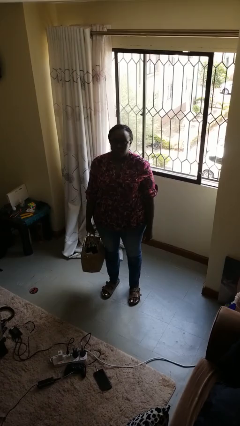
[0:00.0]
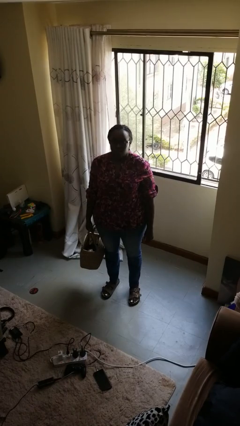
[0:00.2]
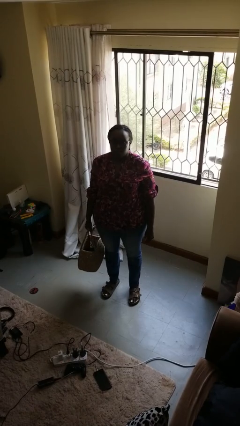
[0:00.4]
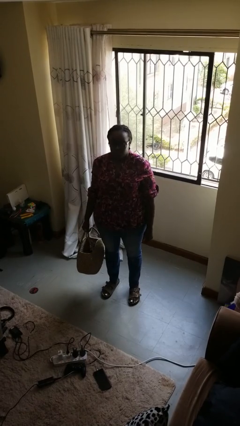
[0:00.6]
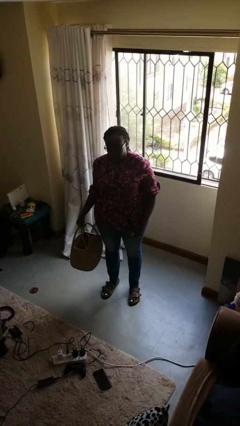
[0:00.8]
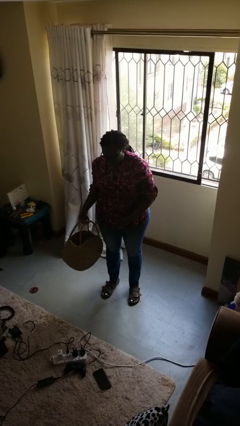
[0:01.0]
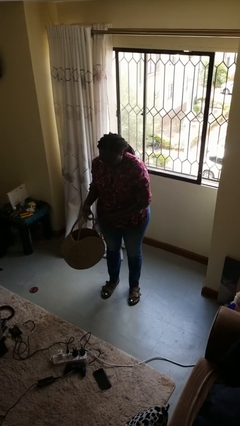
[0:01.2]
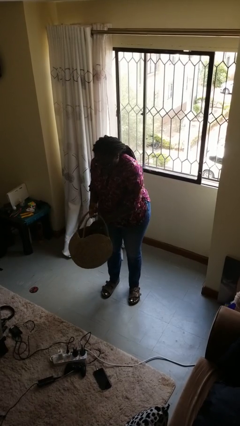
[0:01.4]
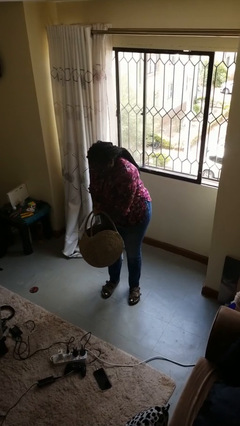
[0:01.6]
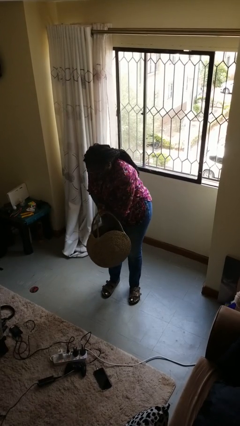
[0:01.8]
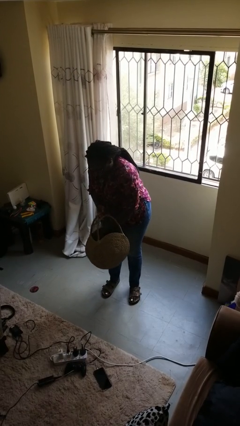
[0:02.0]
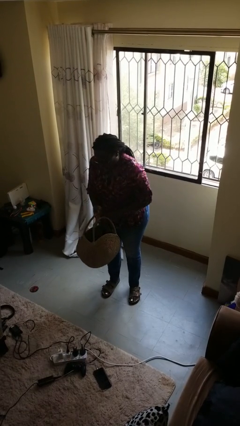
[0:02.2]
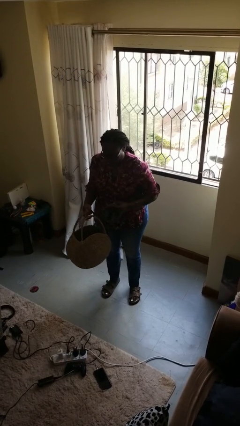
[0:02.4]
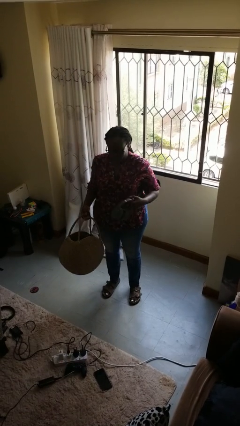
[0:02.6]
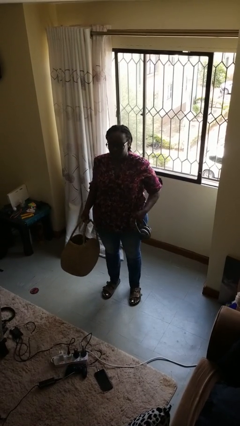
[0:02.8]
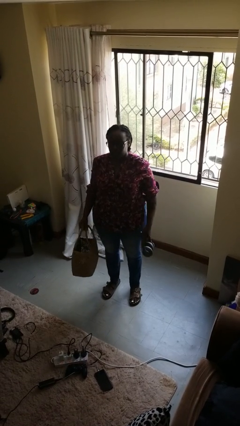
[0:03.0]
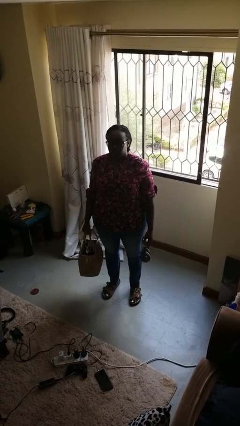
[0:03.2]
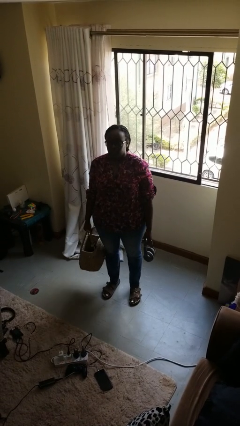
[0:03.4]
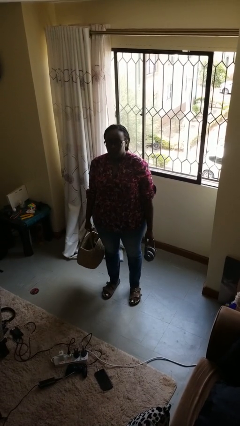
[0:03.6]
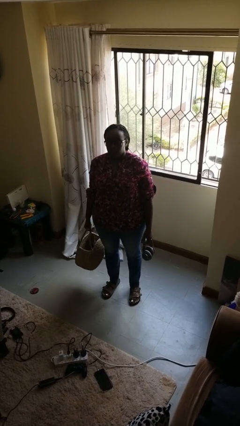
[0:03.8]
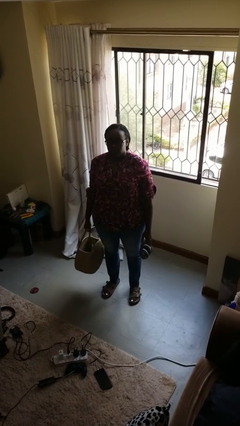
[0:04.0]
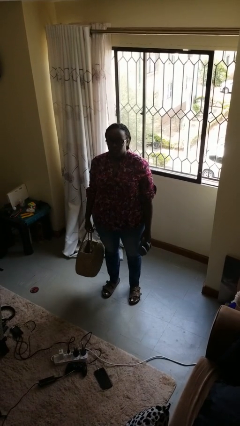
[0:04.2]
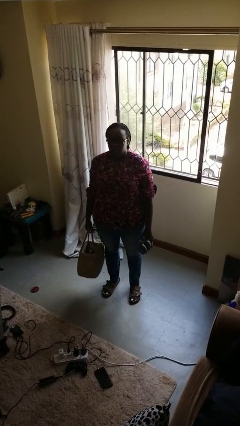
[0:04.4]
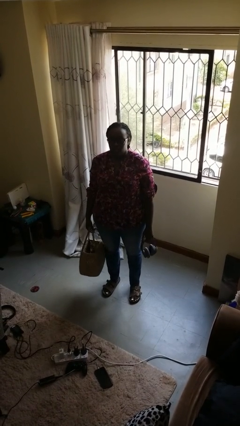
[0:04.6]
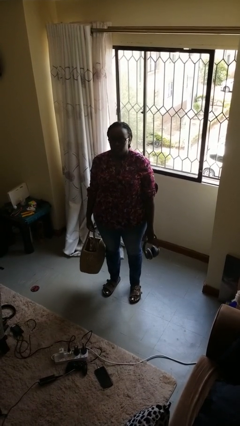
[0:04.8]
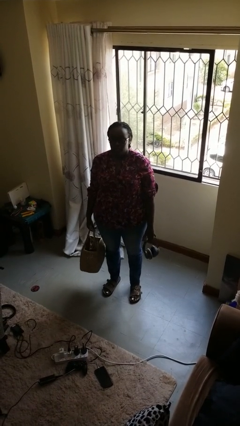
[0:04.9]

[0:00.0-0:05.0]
person takes object from basket

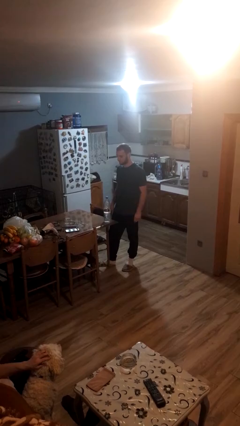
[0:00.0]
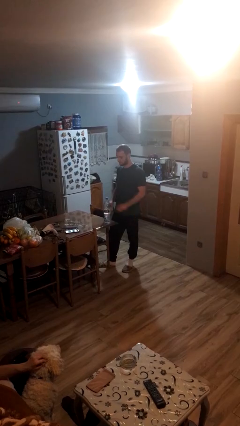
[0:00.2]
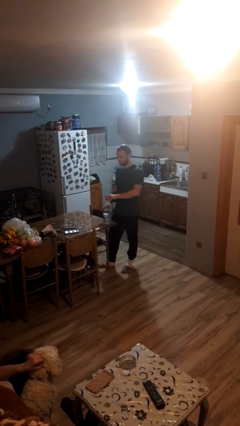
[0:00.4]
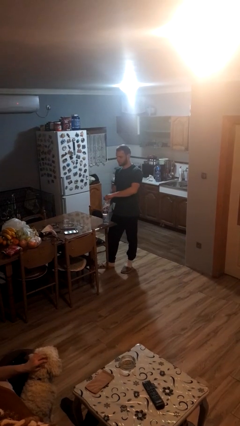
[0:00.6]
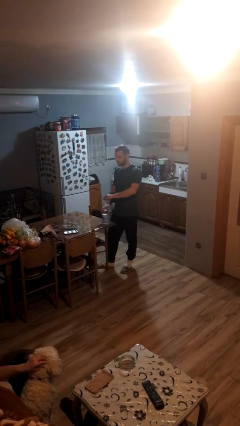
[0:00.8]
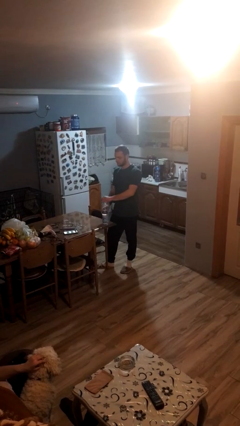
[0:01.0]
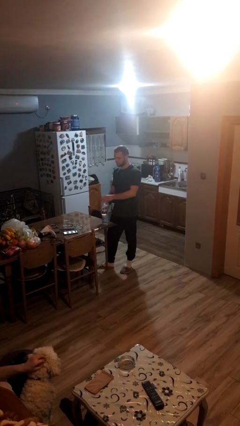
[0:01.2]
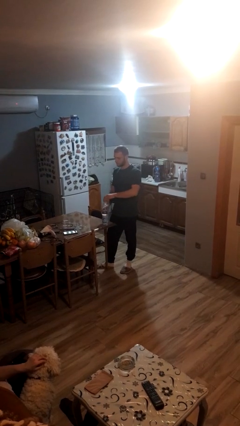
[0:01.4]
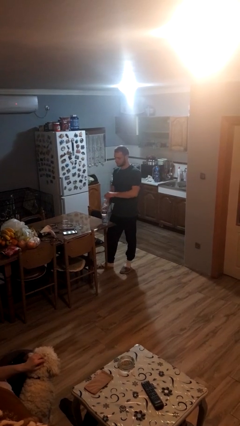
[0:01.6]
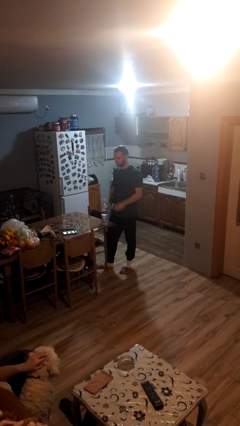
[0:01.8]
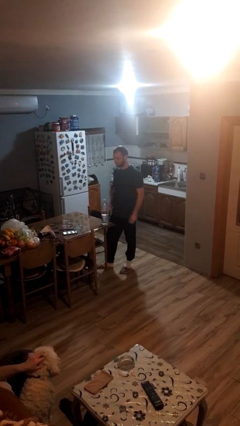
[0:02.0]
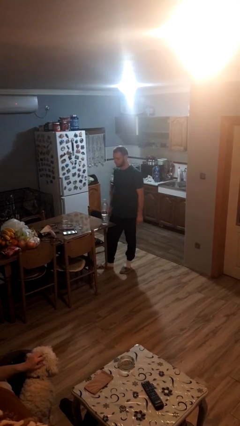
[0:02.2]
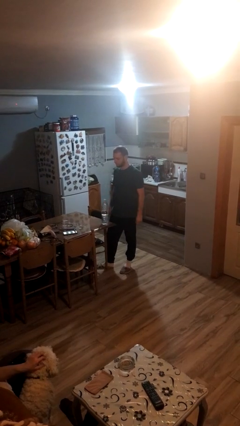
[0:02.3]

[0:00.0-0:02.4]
person unscrews lid from bottle

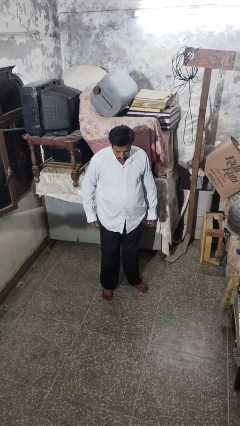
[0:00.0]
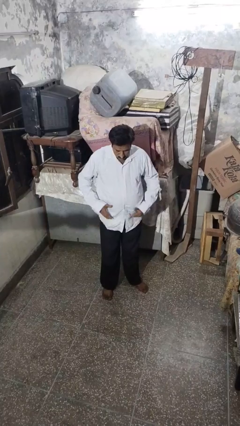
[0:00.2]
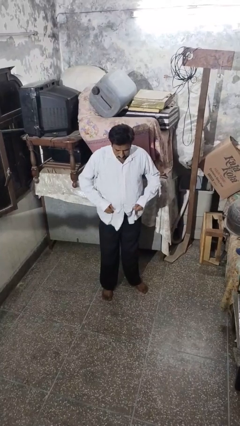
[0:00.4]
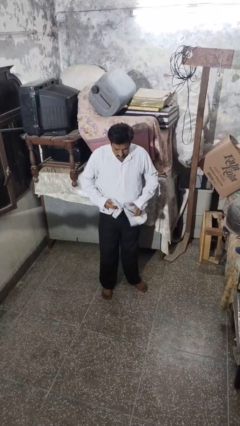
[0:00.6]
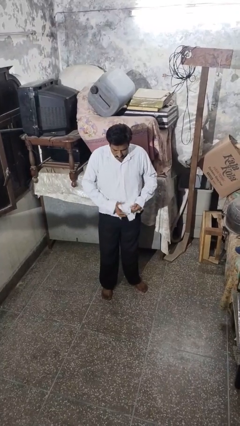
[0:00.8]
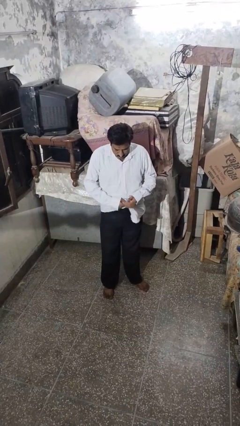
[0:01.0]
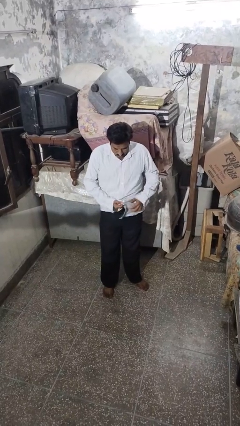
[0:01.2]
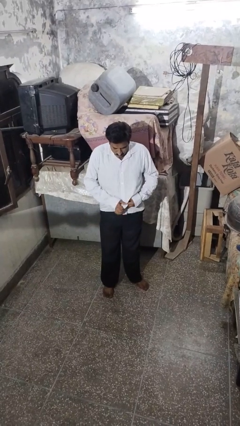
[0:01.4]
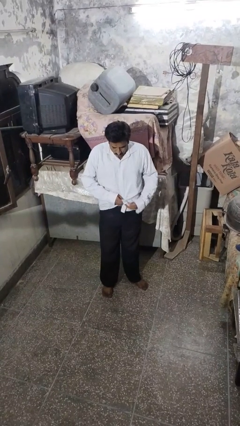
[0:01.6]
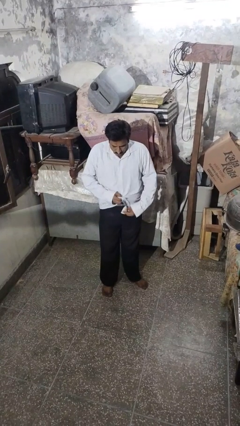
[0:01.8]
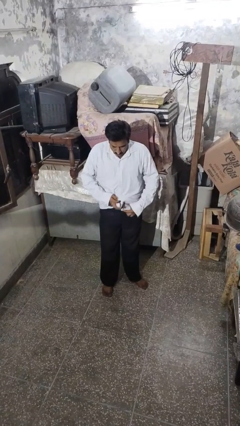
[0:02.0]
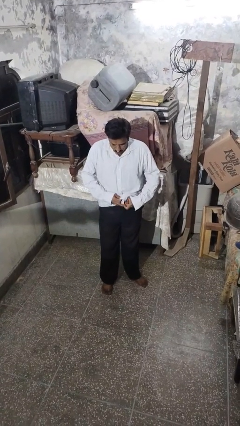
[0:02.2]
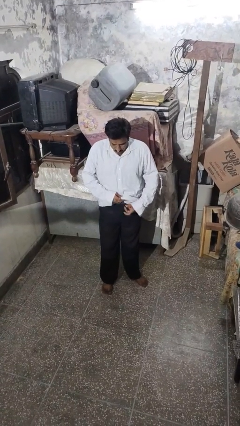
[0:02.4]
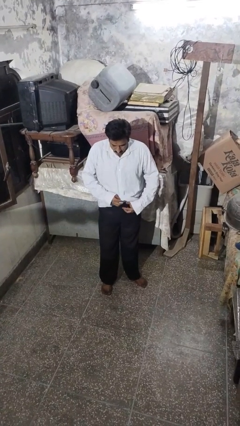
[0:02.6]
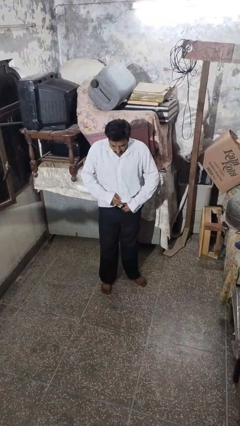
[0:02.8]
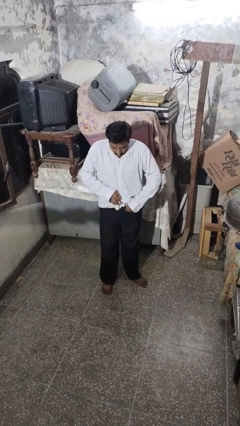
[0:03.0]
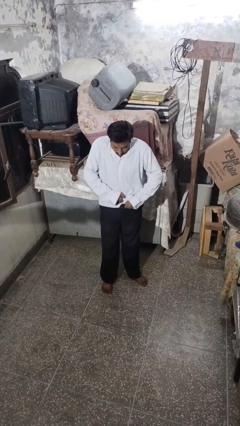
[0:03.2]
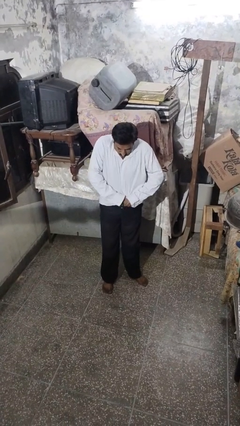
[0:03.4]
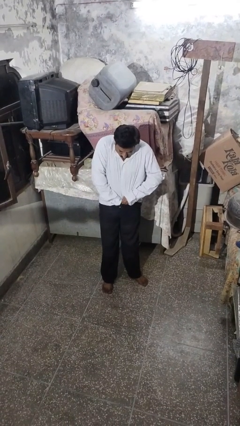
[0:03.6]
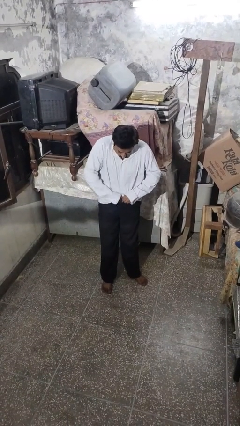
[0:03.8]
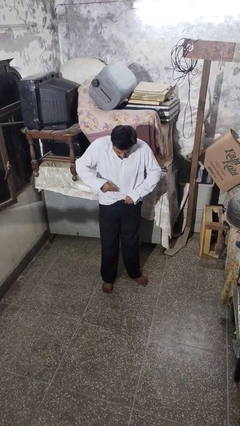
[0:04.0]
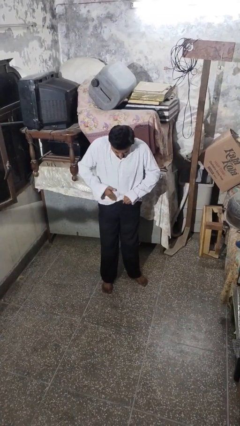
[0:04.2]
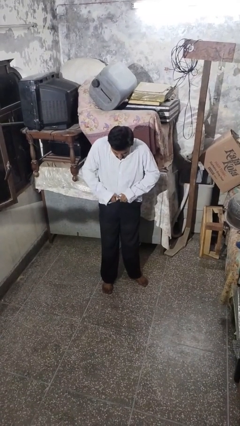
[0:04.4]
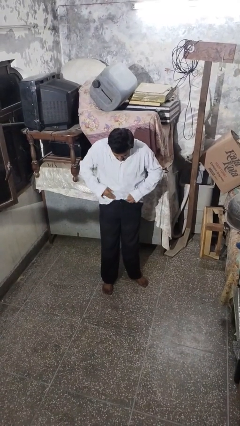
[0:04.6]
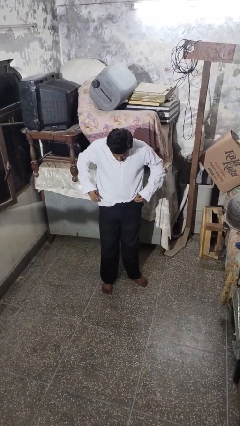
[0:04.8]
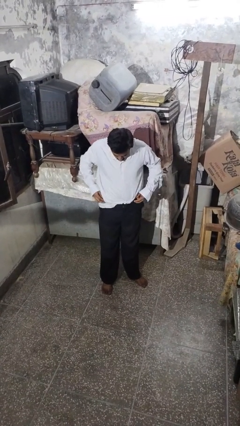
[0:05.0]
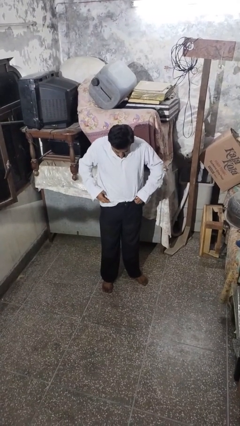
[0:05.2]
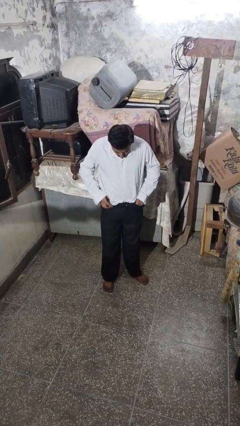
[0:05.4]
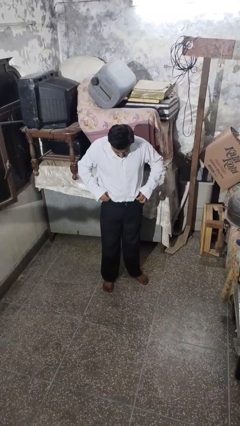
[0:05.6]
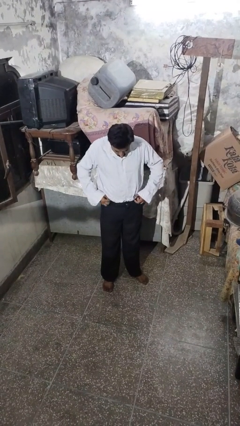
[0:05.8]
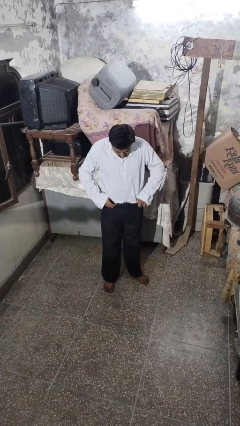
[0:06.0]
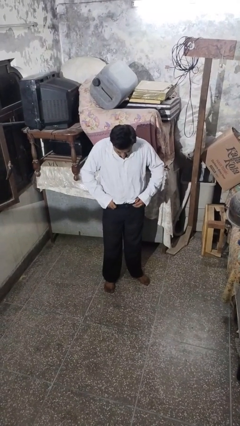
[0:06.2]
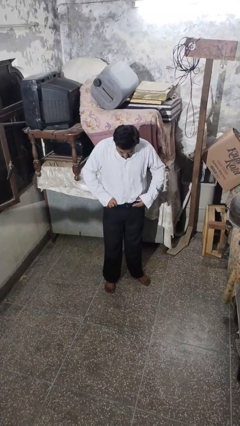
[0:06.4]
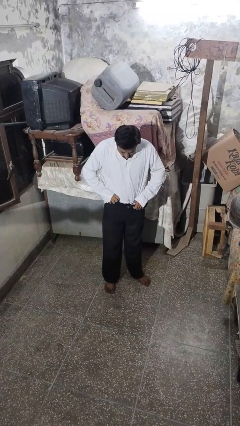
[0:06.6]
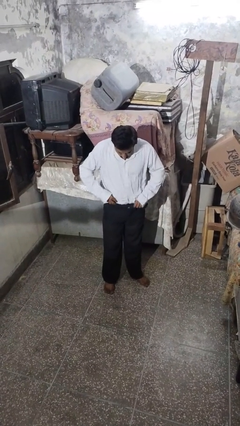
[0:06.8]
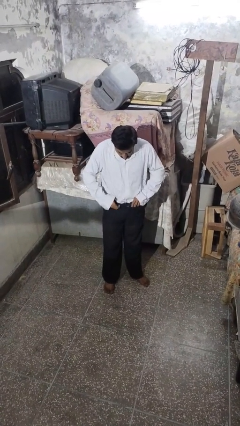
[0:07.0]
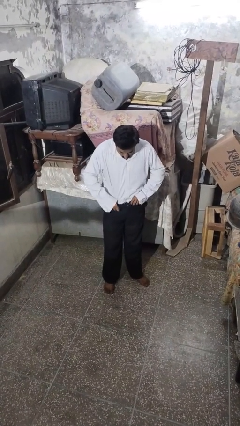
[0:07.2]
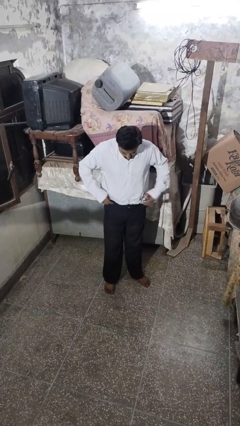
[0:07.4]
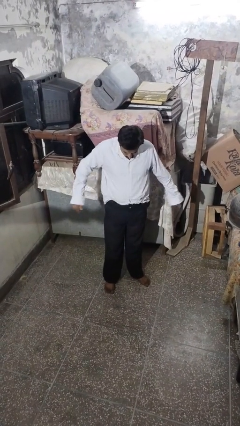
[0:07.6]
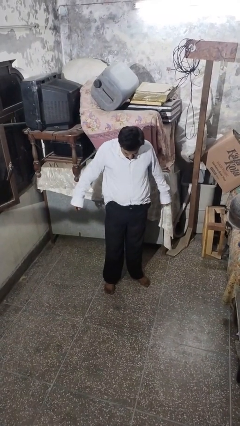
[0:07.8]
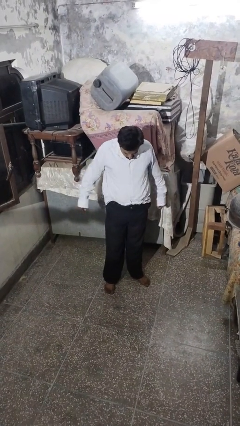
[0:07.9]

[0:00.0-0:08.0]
person tucks in shirt

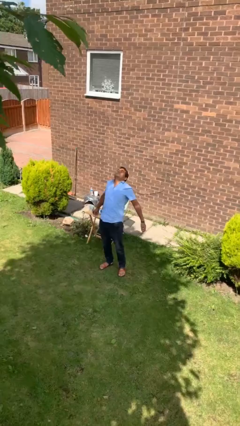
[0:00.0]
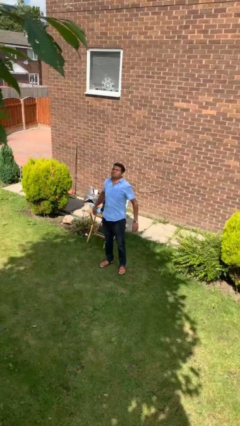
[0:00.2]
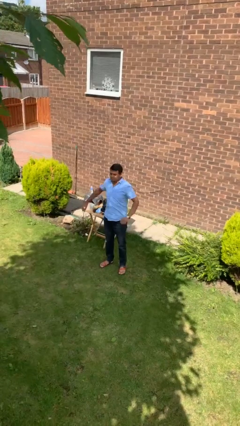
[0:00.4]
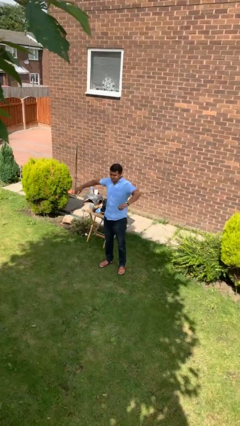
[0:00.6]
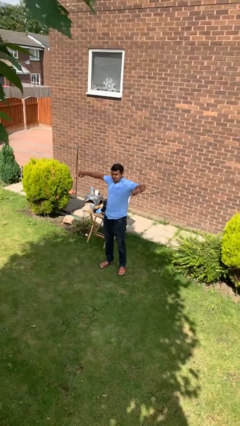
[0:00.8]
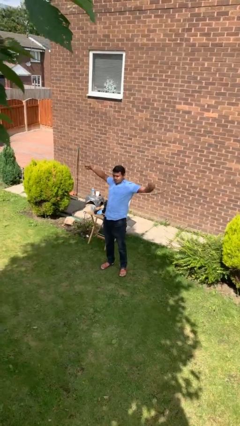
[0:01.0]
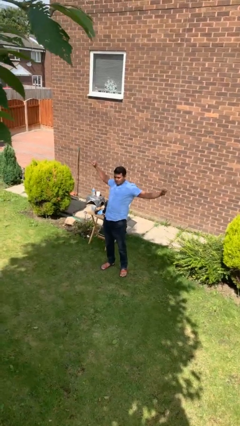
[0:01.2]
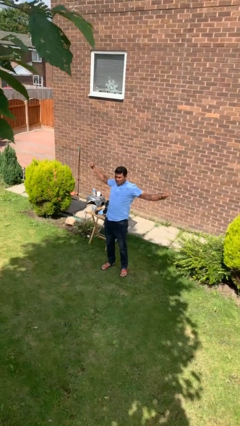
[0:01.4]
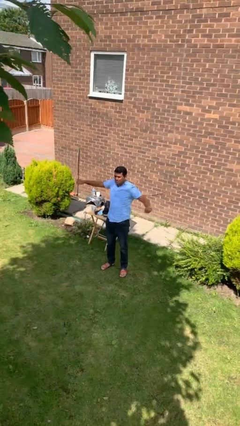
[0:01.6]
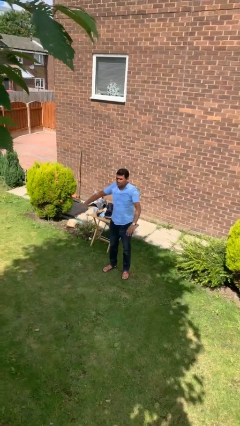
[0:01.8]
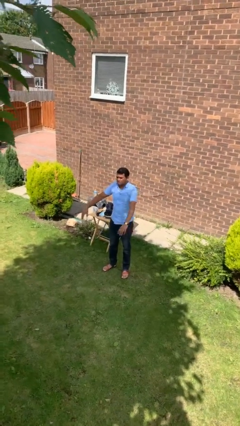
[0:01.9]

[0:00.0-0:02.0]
person stretches arms to side

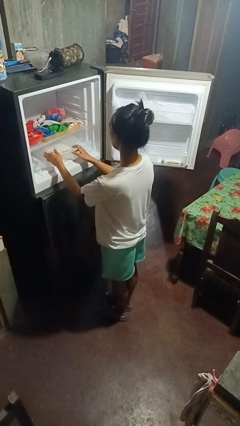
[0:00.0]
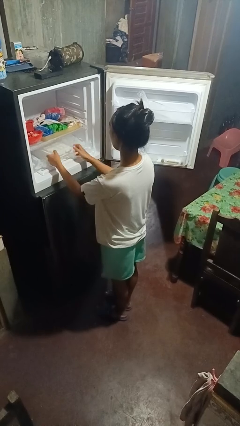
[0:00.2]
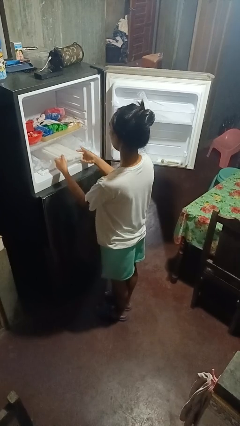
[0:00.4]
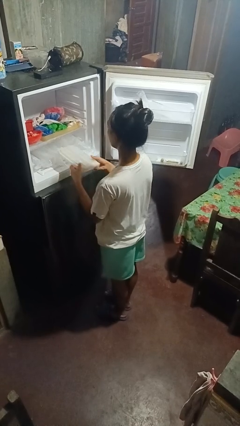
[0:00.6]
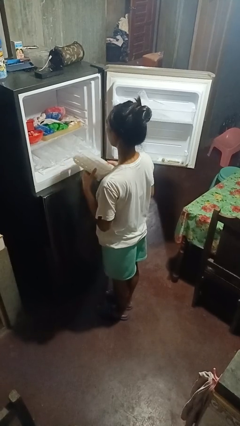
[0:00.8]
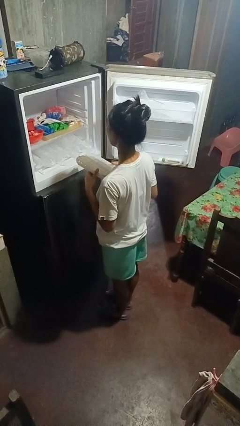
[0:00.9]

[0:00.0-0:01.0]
person takes object from refrigerator
